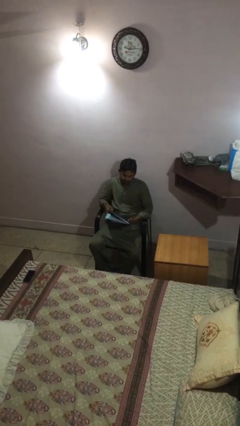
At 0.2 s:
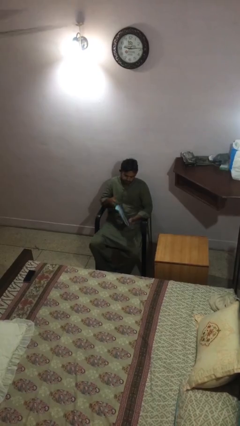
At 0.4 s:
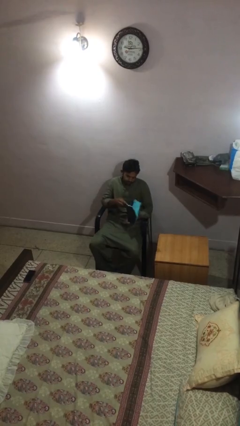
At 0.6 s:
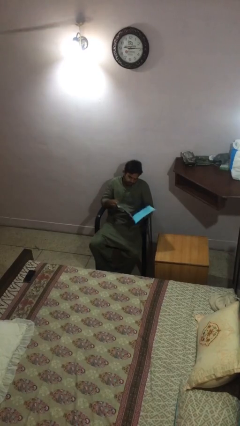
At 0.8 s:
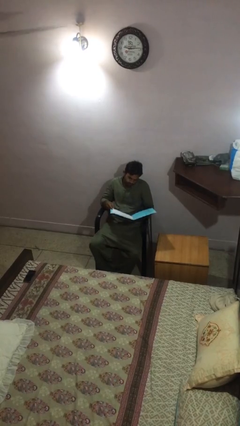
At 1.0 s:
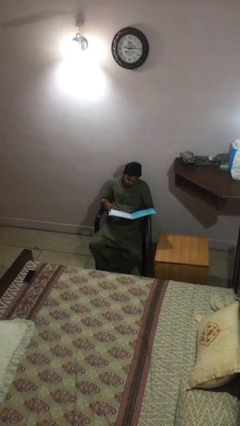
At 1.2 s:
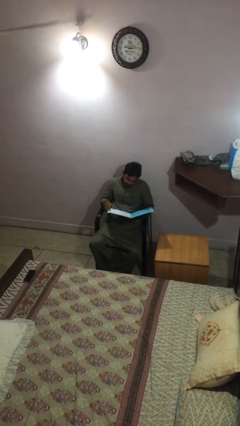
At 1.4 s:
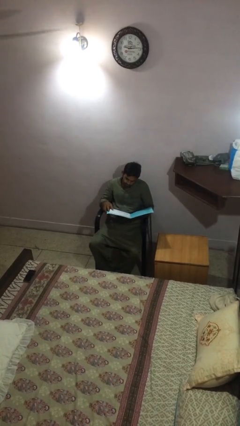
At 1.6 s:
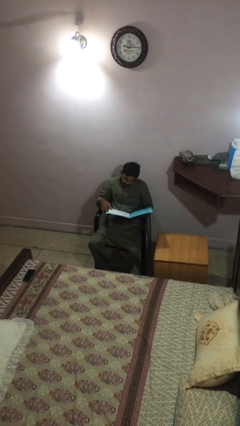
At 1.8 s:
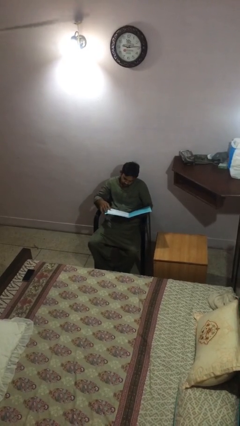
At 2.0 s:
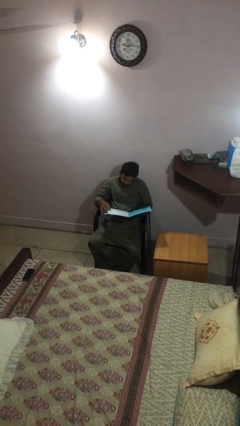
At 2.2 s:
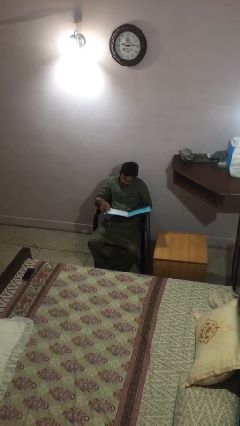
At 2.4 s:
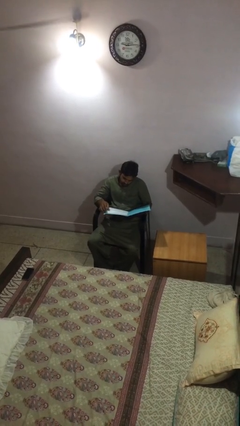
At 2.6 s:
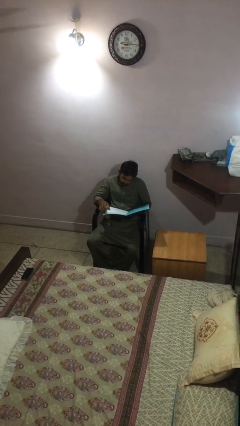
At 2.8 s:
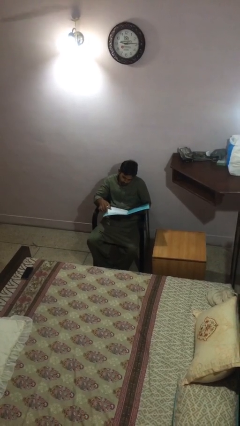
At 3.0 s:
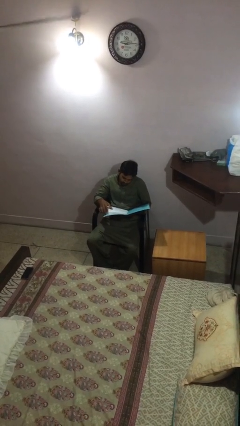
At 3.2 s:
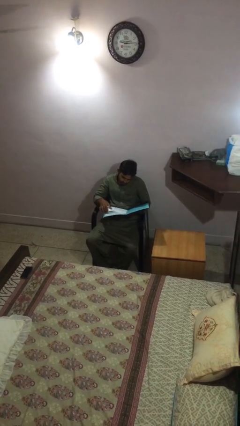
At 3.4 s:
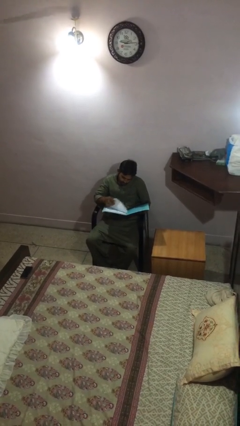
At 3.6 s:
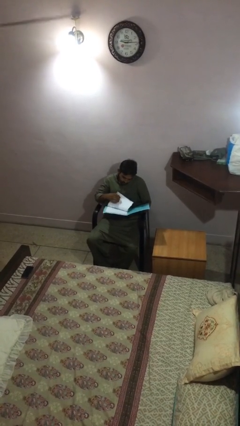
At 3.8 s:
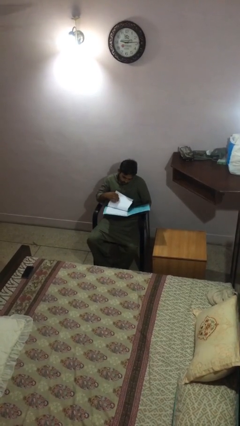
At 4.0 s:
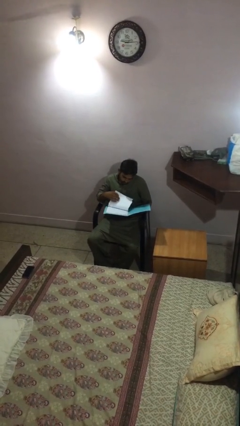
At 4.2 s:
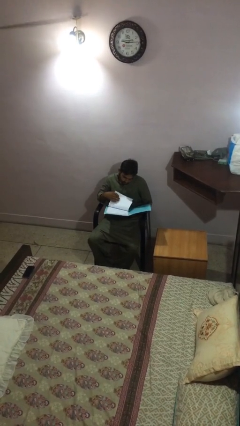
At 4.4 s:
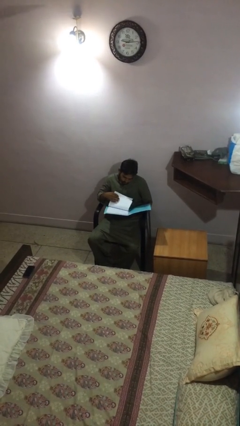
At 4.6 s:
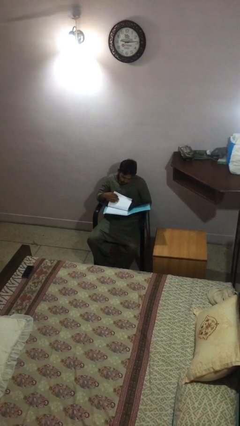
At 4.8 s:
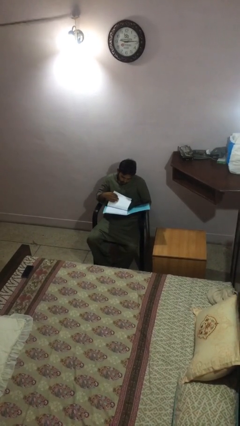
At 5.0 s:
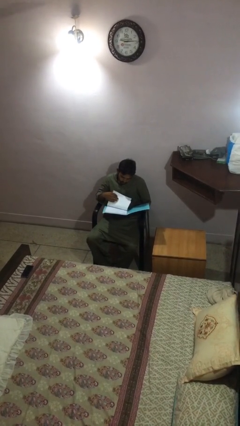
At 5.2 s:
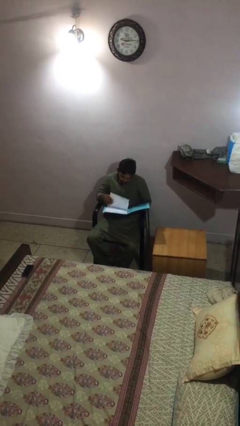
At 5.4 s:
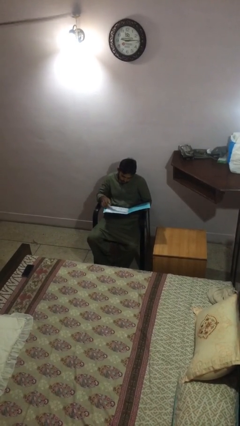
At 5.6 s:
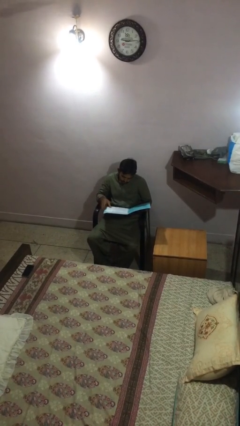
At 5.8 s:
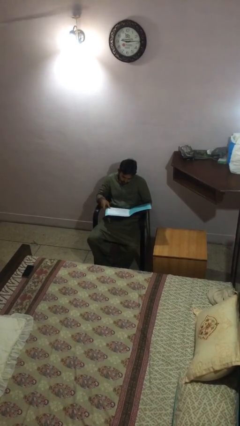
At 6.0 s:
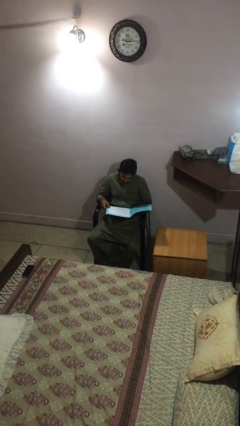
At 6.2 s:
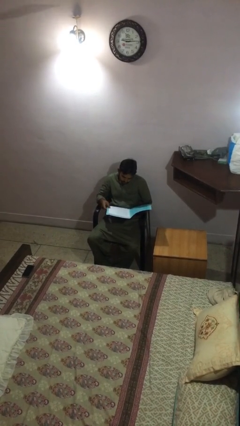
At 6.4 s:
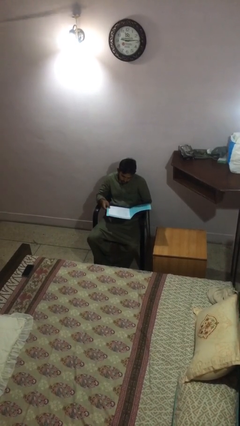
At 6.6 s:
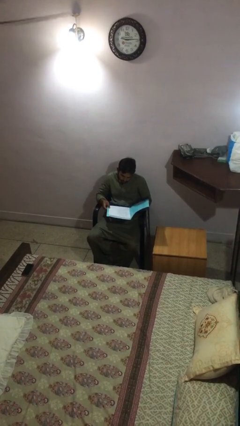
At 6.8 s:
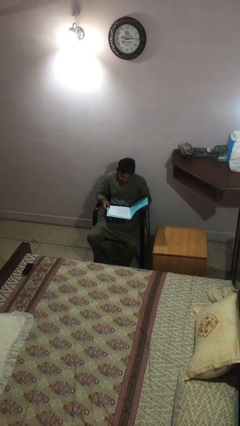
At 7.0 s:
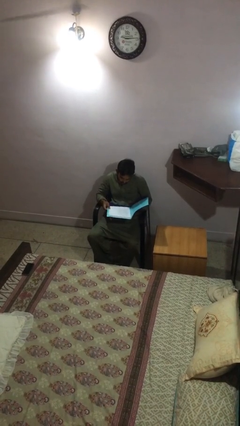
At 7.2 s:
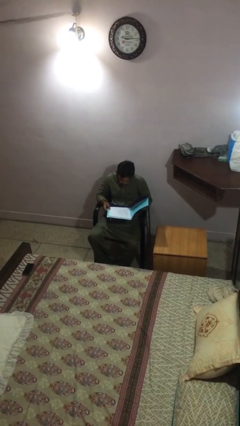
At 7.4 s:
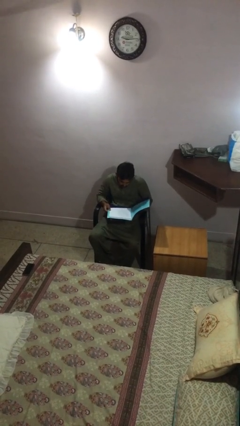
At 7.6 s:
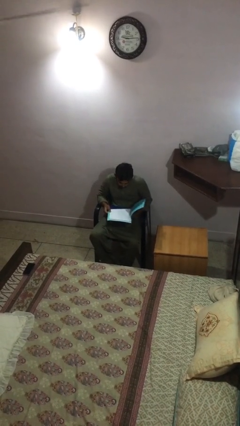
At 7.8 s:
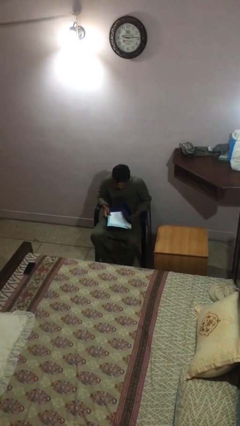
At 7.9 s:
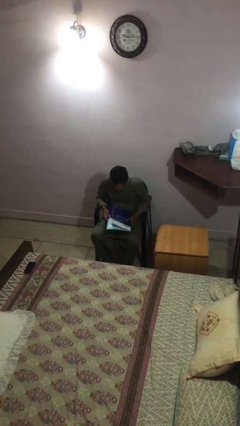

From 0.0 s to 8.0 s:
person reads document

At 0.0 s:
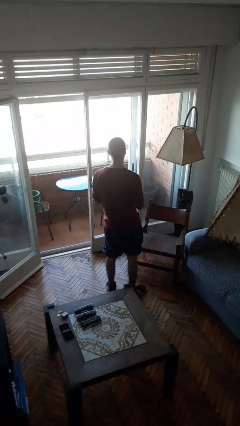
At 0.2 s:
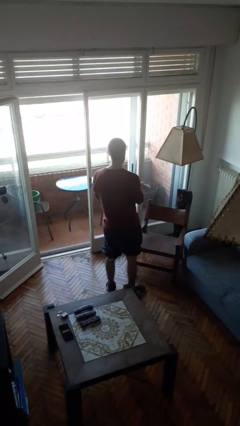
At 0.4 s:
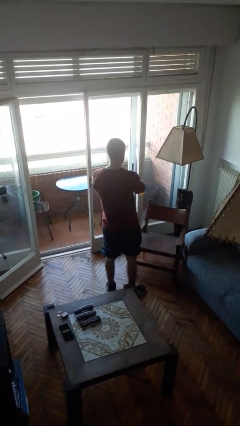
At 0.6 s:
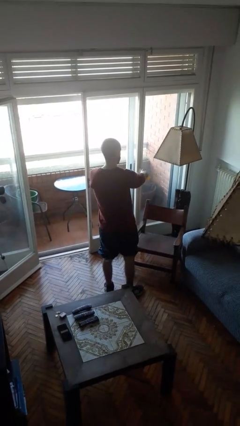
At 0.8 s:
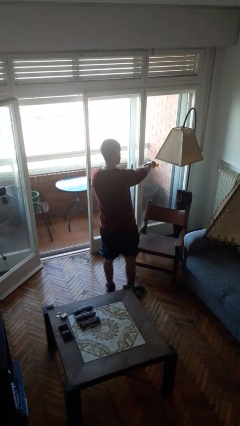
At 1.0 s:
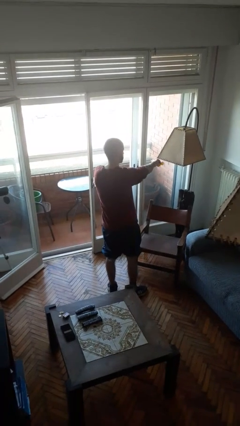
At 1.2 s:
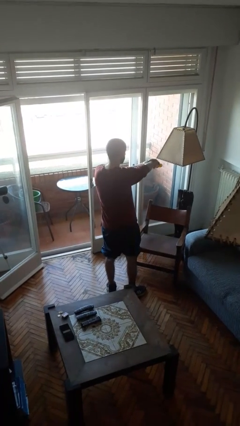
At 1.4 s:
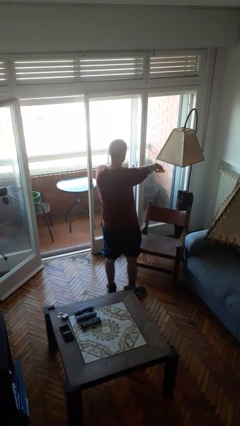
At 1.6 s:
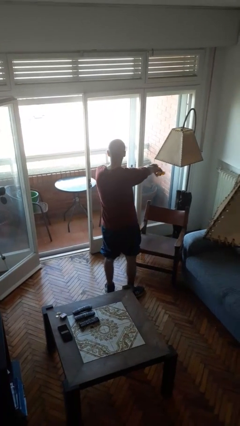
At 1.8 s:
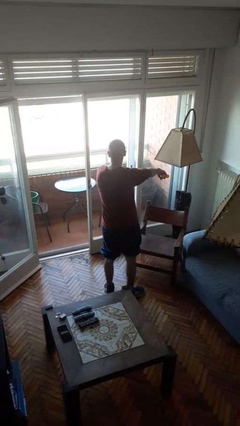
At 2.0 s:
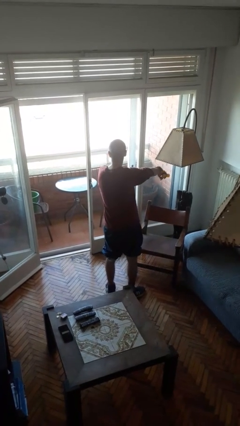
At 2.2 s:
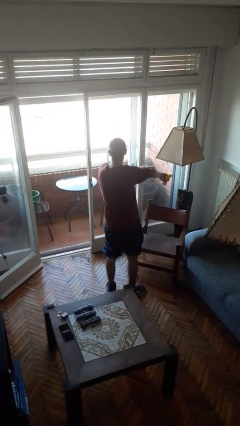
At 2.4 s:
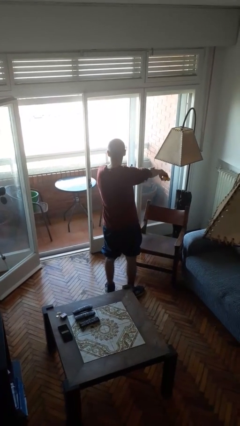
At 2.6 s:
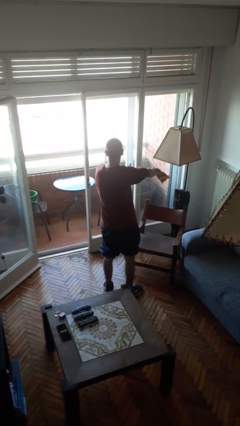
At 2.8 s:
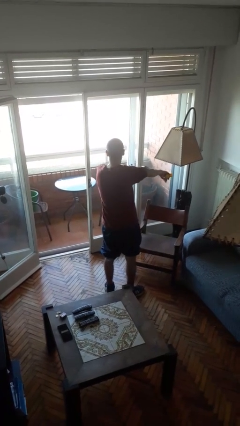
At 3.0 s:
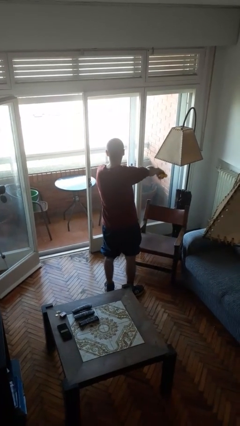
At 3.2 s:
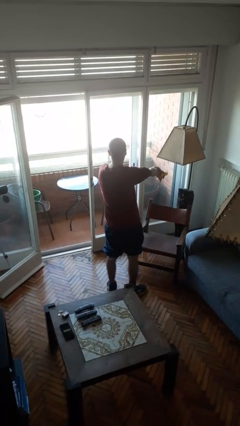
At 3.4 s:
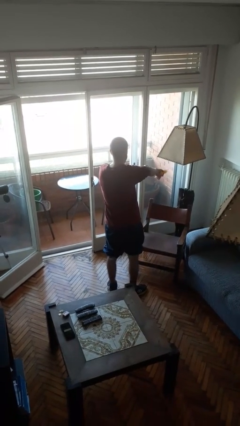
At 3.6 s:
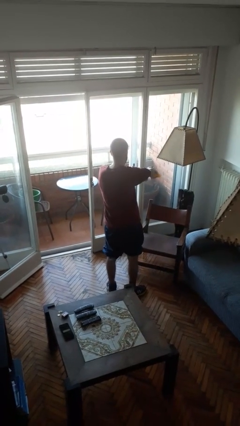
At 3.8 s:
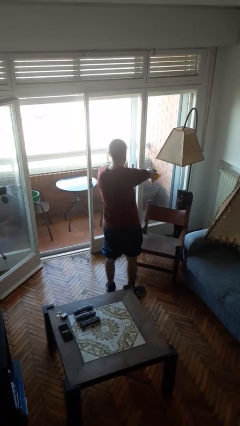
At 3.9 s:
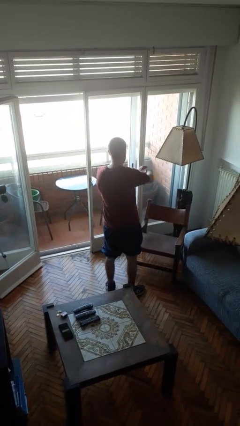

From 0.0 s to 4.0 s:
person applies sunscreen

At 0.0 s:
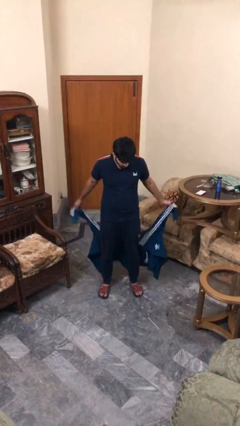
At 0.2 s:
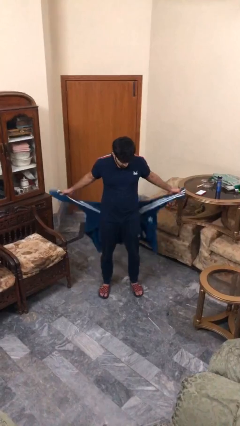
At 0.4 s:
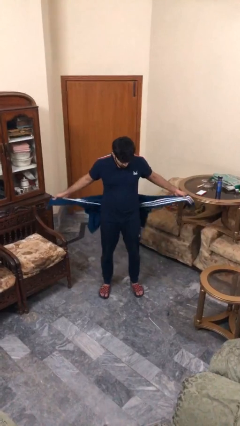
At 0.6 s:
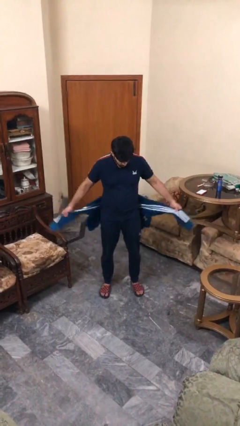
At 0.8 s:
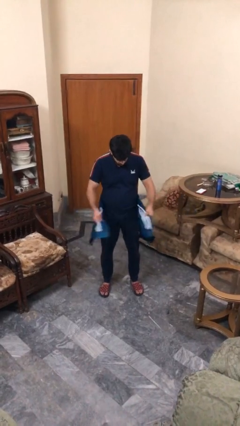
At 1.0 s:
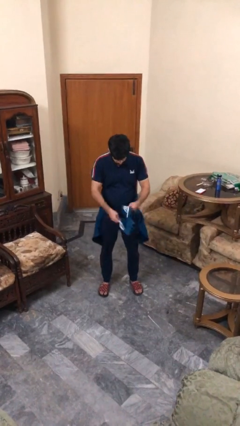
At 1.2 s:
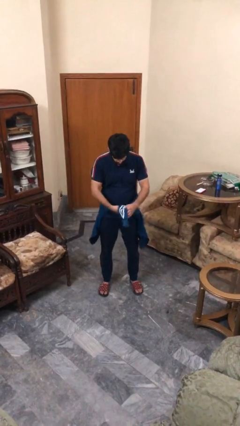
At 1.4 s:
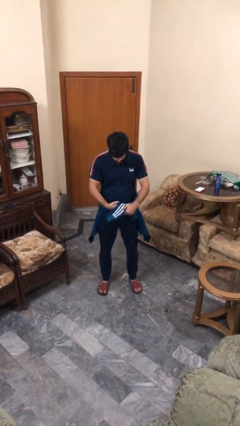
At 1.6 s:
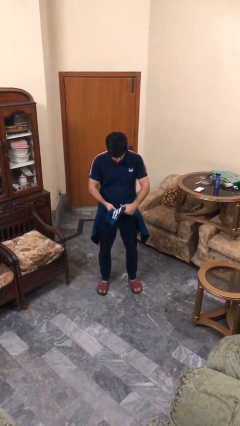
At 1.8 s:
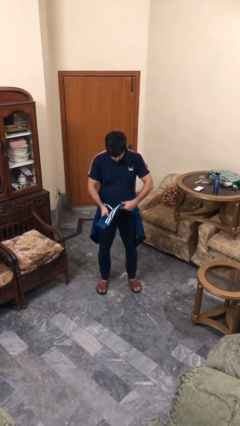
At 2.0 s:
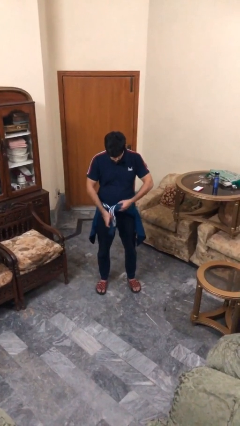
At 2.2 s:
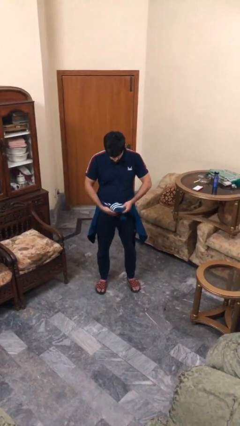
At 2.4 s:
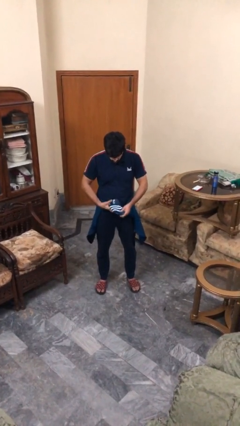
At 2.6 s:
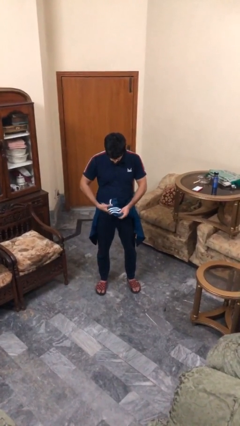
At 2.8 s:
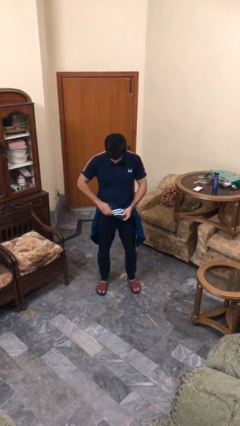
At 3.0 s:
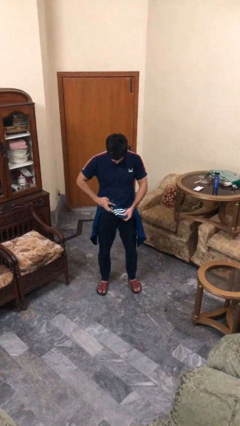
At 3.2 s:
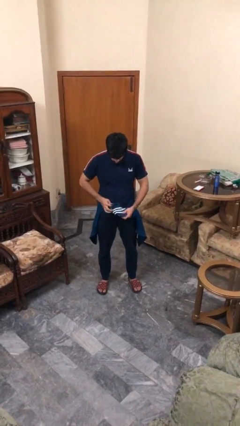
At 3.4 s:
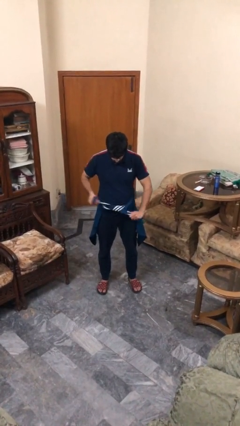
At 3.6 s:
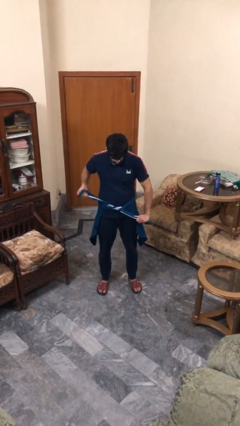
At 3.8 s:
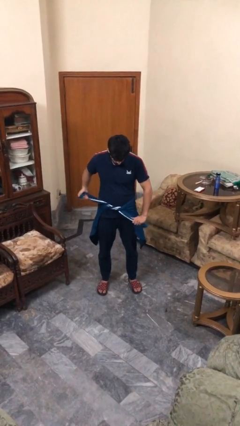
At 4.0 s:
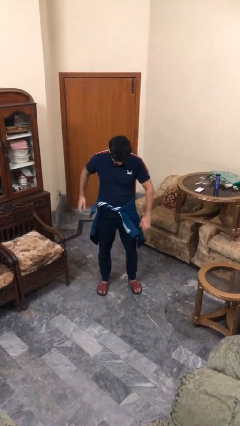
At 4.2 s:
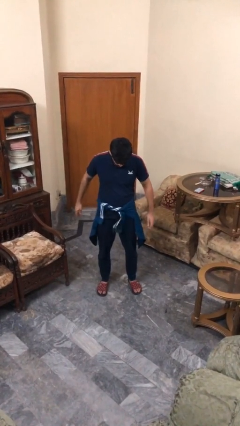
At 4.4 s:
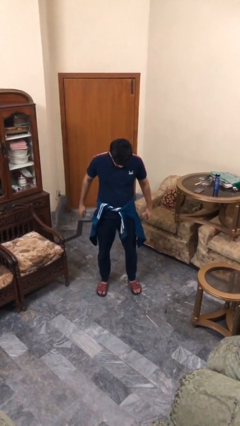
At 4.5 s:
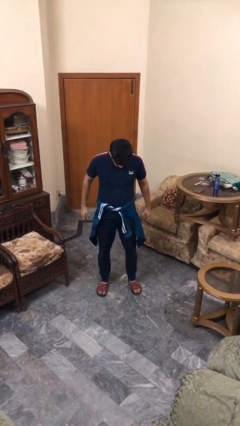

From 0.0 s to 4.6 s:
person ties jacket around waist

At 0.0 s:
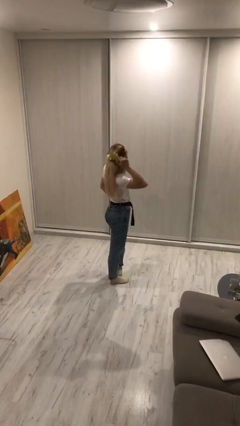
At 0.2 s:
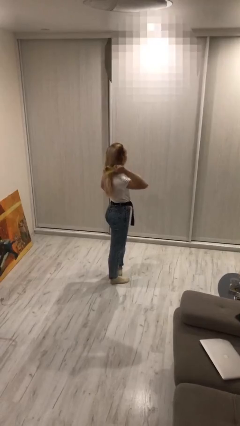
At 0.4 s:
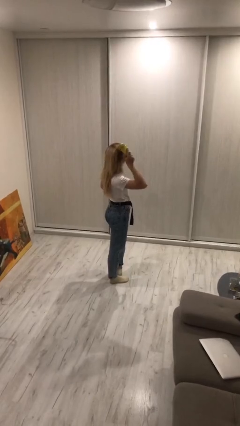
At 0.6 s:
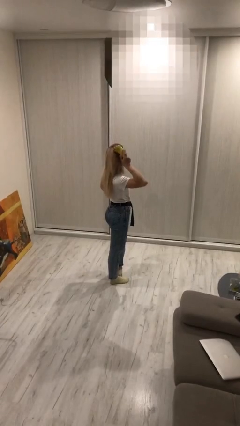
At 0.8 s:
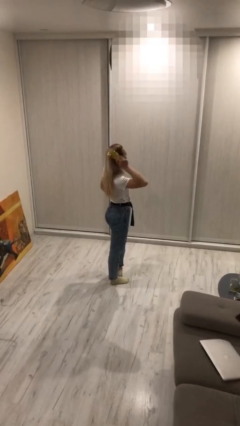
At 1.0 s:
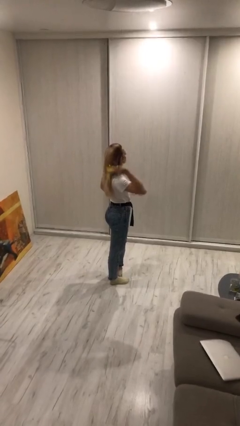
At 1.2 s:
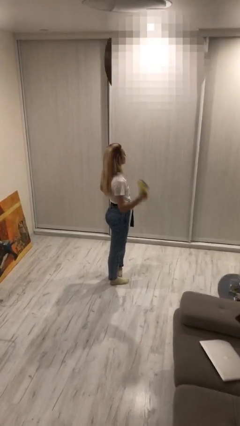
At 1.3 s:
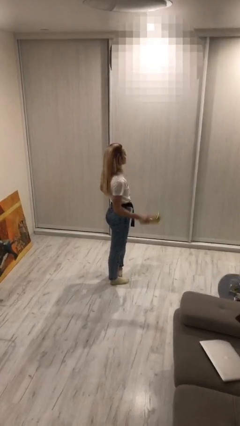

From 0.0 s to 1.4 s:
person brushes hair
